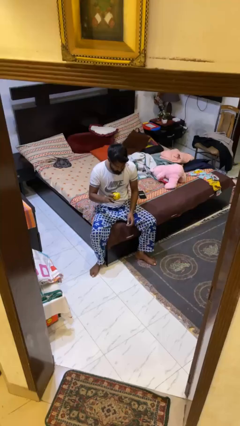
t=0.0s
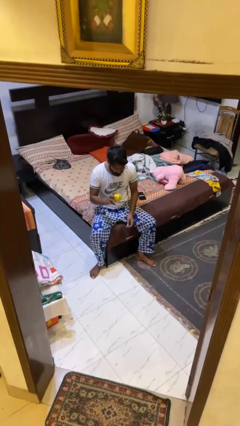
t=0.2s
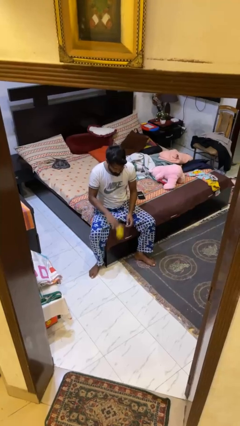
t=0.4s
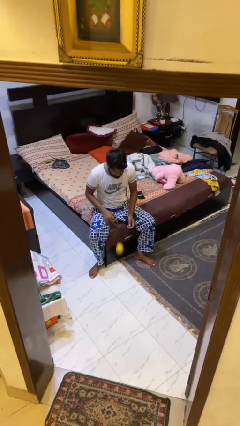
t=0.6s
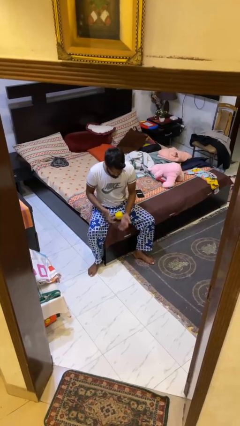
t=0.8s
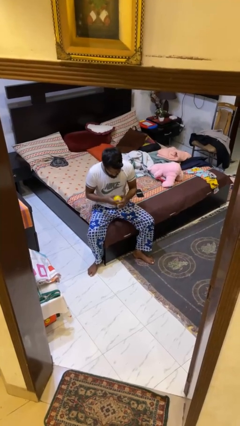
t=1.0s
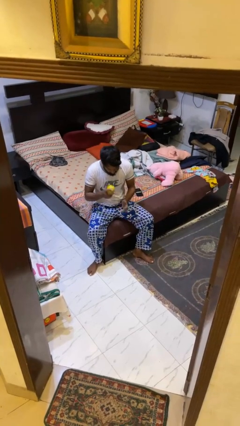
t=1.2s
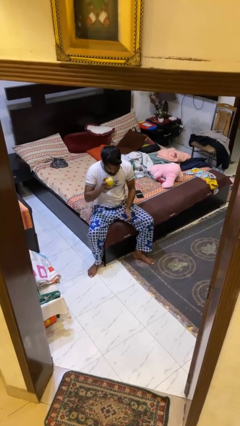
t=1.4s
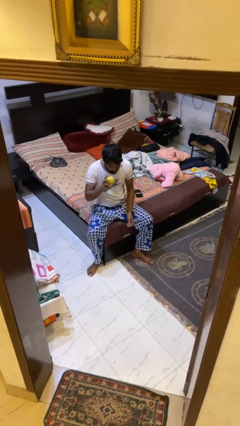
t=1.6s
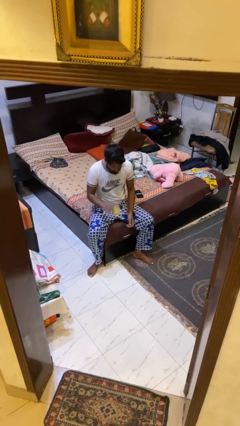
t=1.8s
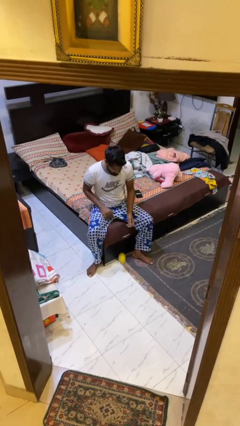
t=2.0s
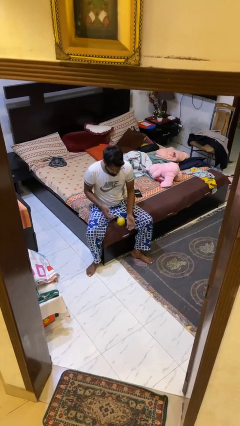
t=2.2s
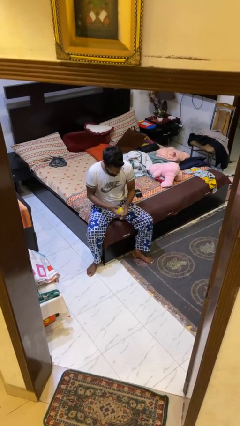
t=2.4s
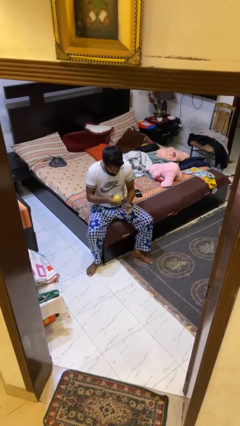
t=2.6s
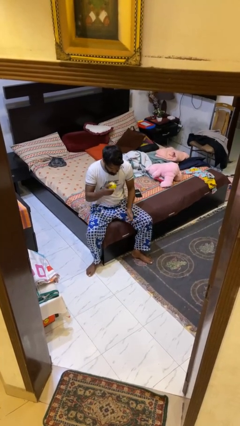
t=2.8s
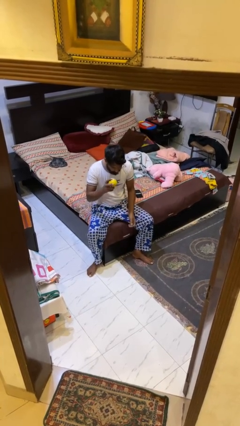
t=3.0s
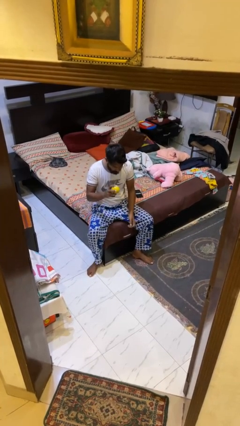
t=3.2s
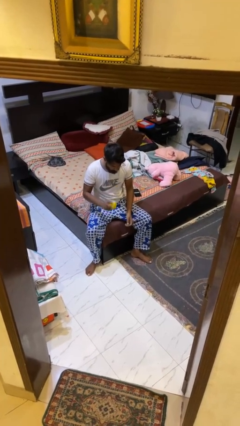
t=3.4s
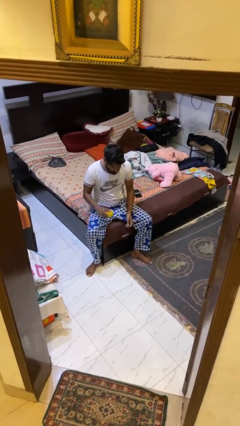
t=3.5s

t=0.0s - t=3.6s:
person bounces ball on floor

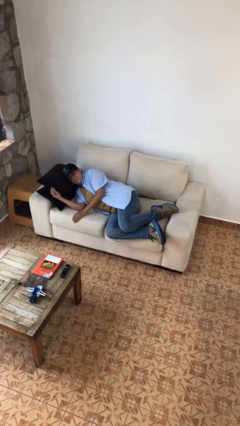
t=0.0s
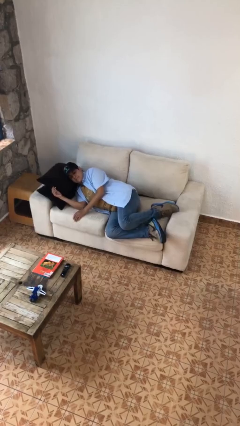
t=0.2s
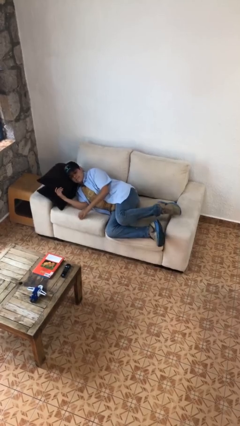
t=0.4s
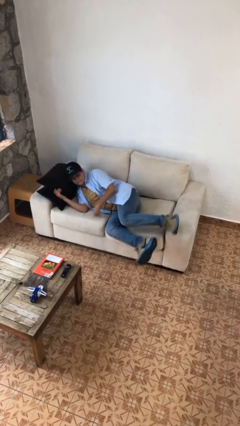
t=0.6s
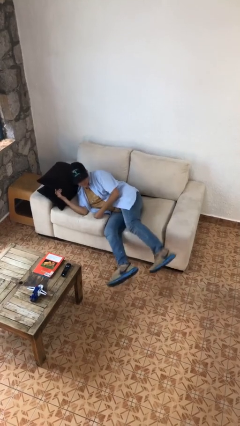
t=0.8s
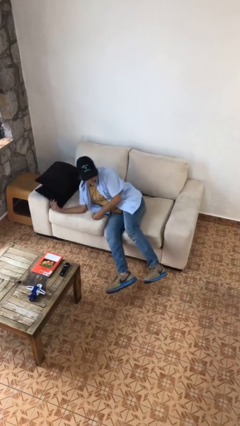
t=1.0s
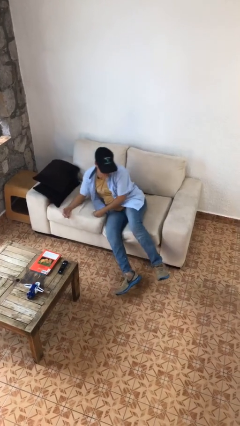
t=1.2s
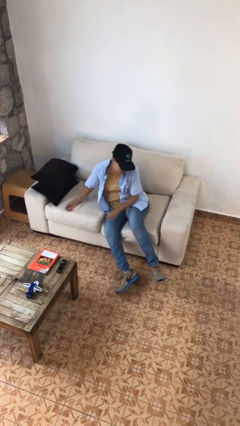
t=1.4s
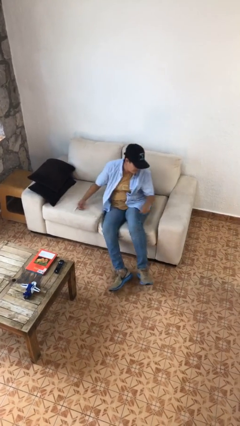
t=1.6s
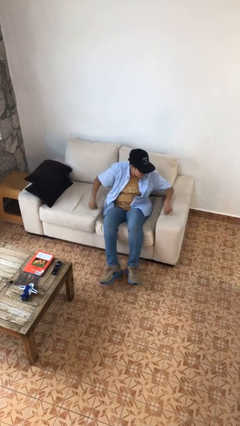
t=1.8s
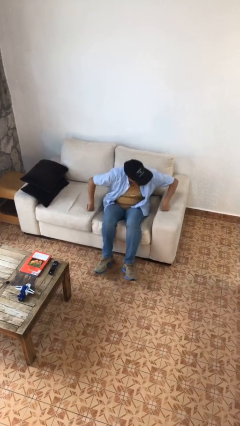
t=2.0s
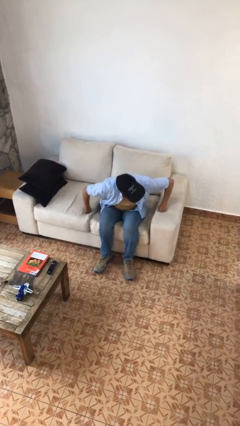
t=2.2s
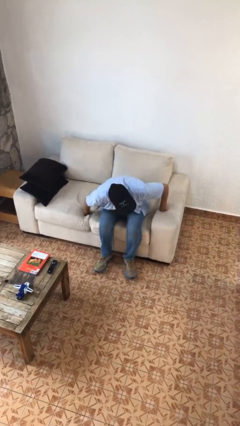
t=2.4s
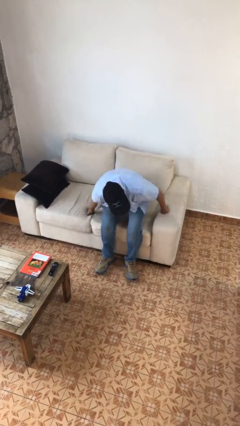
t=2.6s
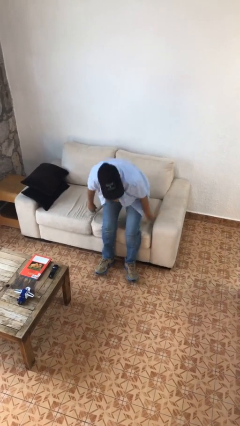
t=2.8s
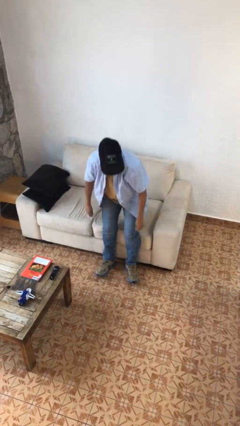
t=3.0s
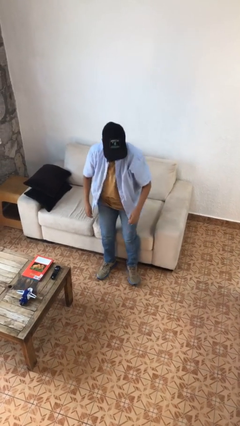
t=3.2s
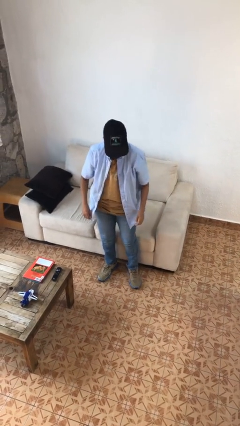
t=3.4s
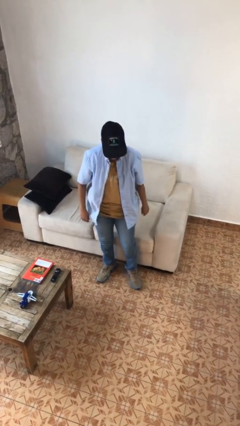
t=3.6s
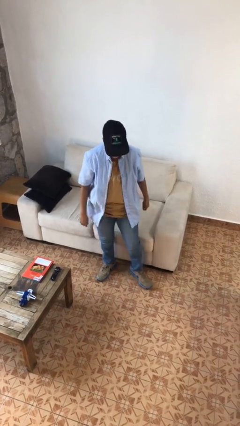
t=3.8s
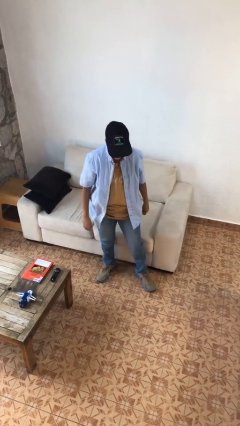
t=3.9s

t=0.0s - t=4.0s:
person stands up

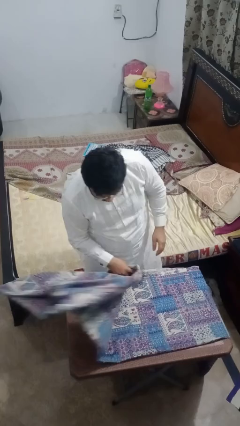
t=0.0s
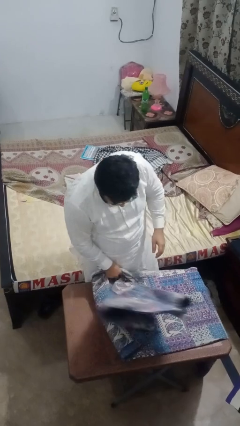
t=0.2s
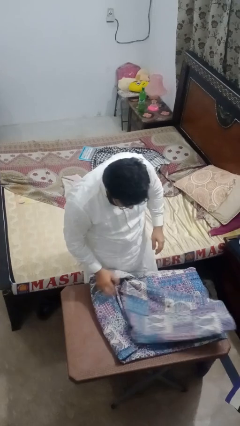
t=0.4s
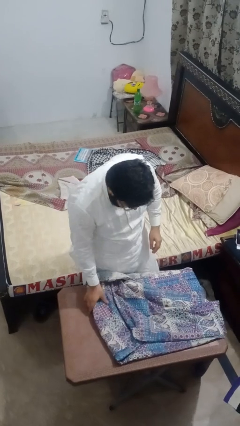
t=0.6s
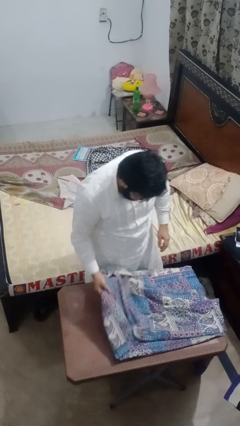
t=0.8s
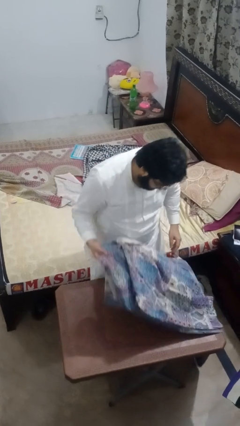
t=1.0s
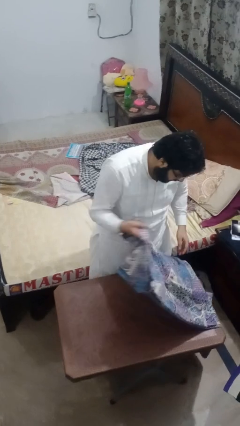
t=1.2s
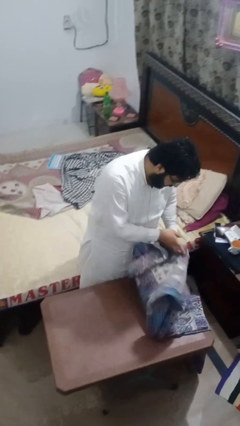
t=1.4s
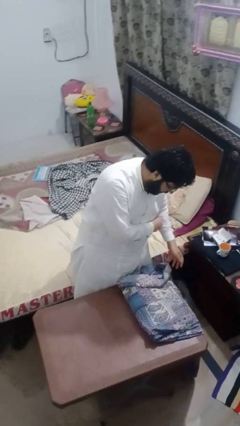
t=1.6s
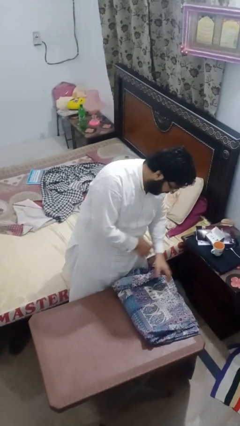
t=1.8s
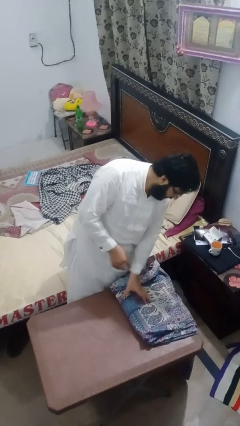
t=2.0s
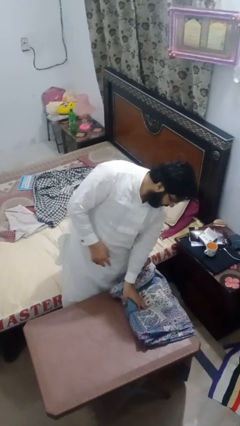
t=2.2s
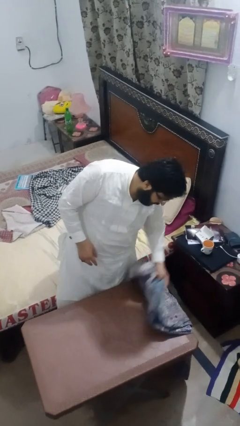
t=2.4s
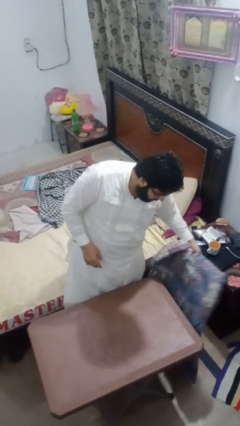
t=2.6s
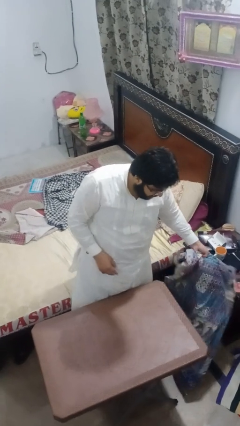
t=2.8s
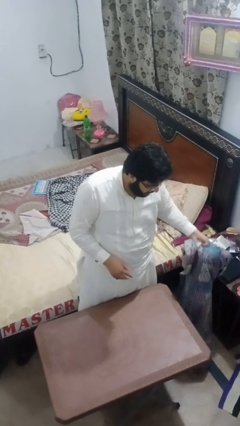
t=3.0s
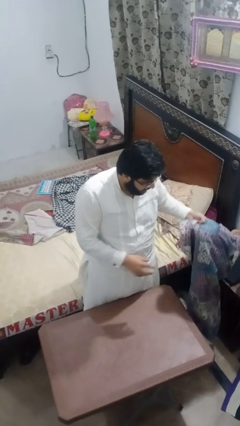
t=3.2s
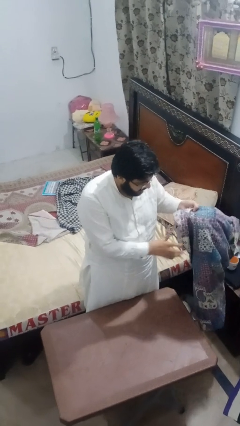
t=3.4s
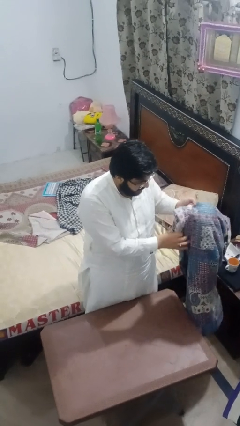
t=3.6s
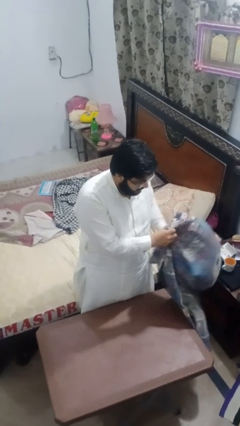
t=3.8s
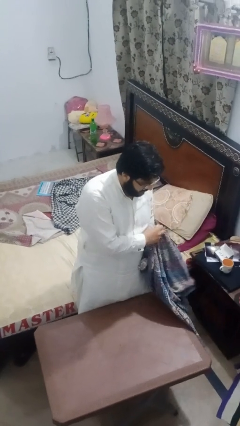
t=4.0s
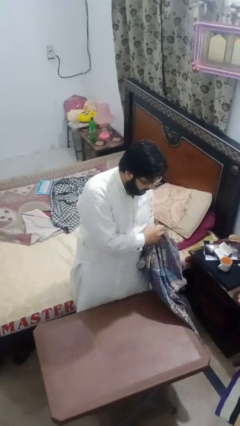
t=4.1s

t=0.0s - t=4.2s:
person folds tablecloth

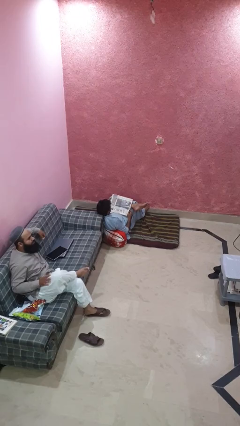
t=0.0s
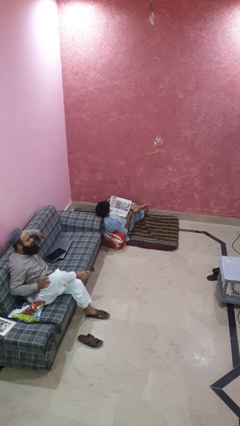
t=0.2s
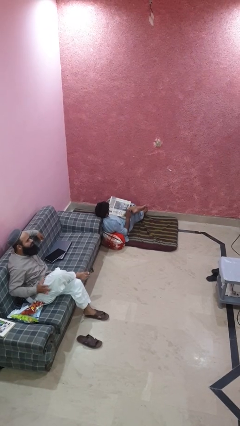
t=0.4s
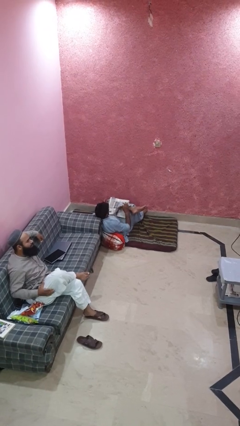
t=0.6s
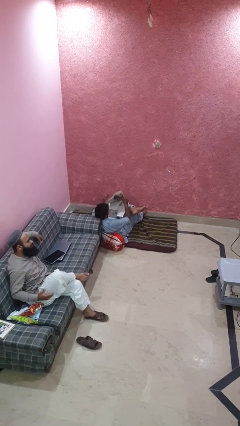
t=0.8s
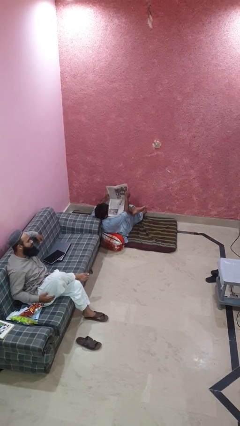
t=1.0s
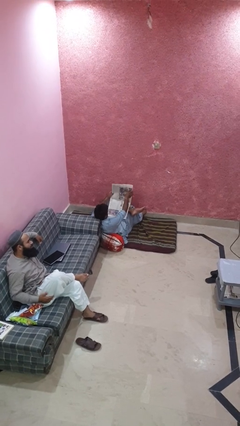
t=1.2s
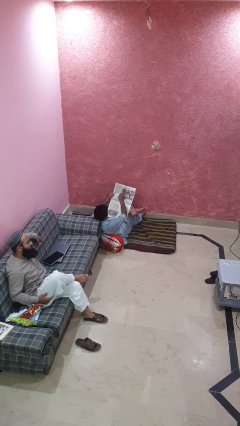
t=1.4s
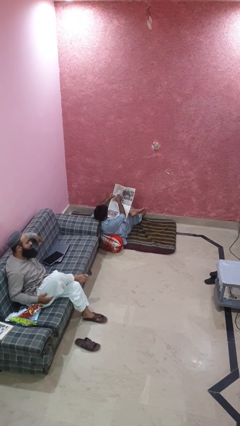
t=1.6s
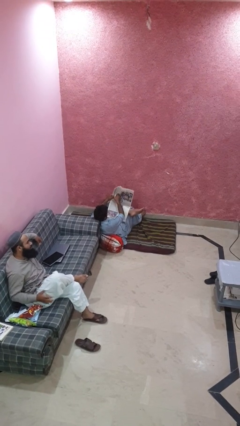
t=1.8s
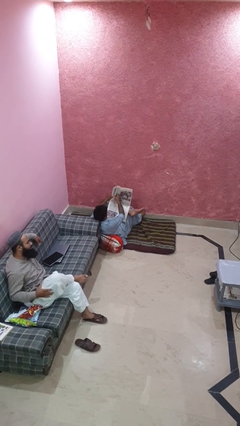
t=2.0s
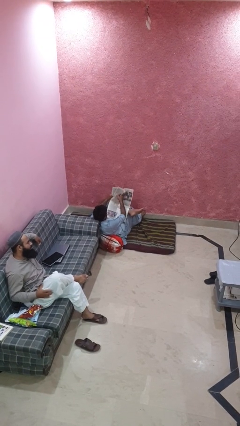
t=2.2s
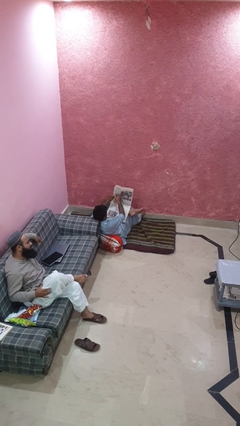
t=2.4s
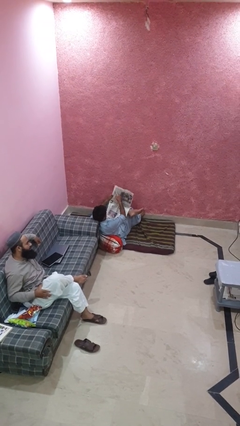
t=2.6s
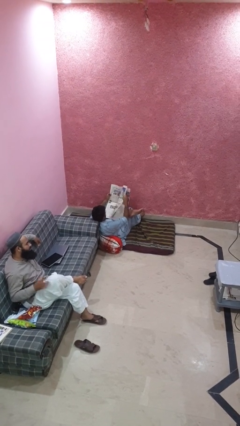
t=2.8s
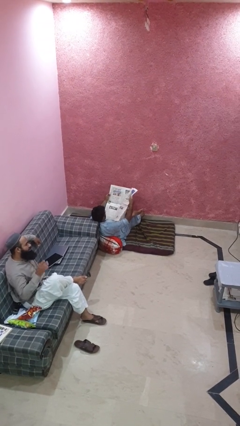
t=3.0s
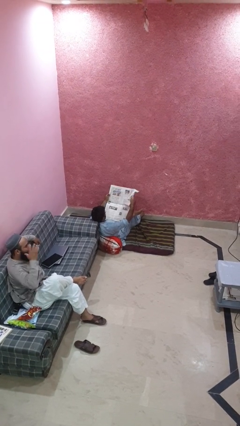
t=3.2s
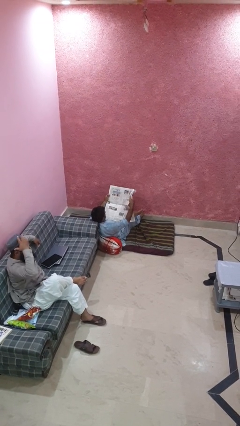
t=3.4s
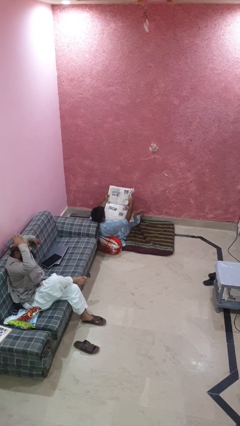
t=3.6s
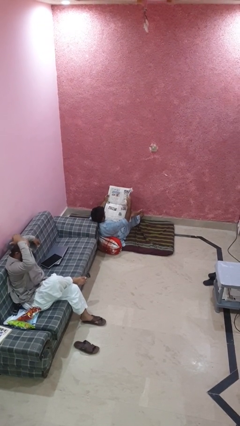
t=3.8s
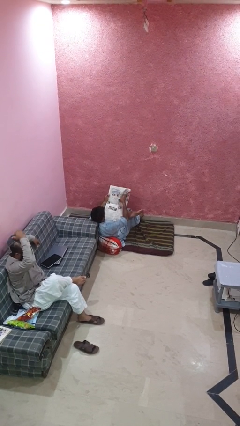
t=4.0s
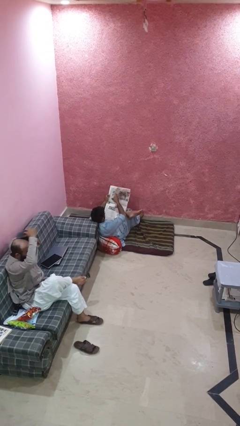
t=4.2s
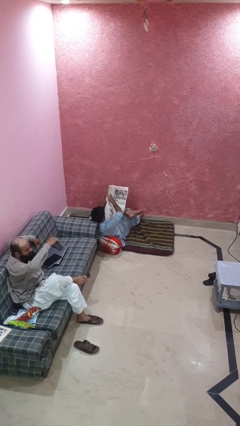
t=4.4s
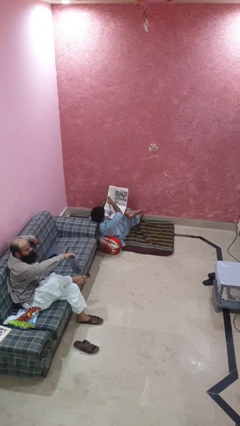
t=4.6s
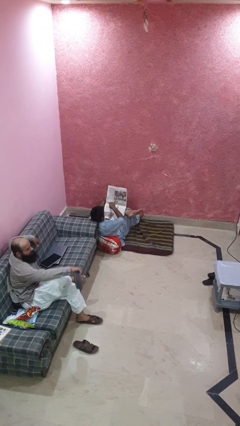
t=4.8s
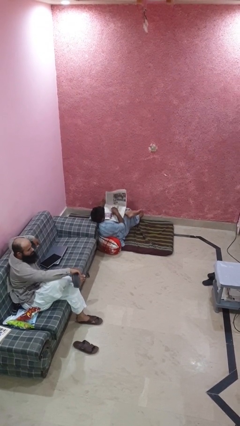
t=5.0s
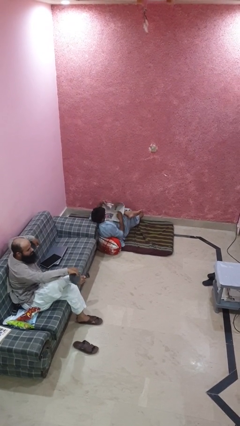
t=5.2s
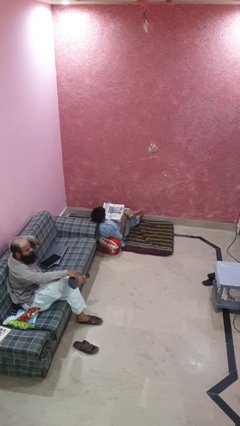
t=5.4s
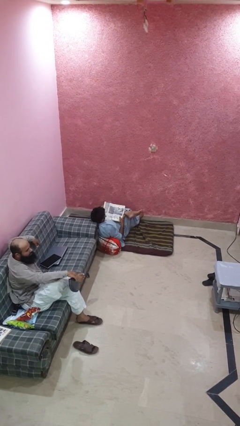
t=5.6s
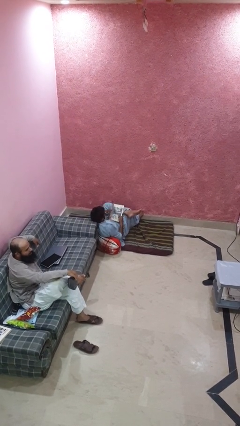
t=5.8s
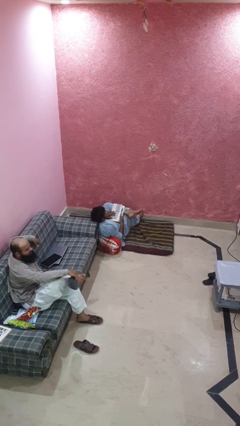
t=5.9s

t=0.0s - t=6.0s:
person reads newspaper
